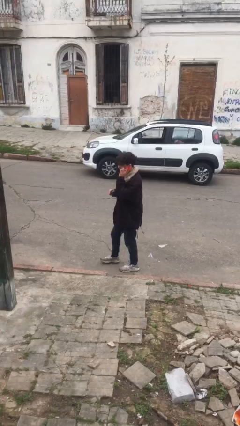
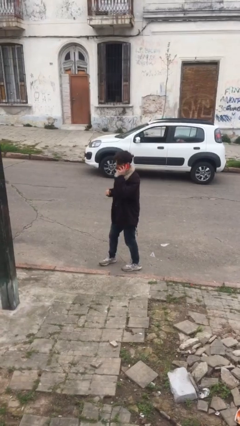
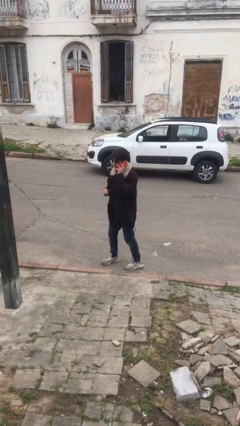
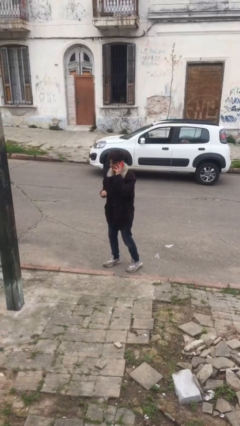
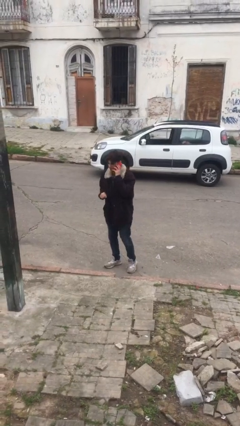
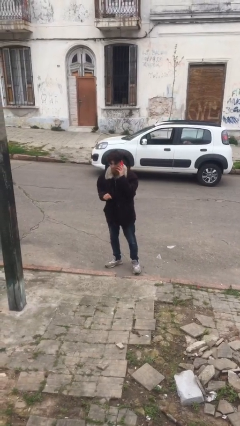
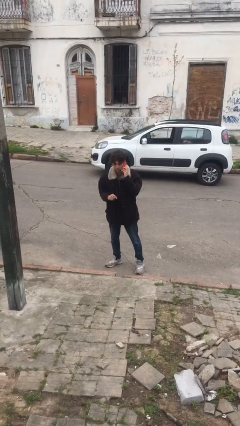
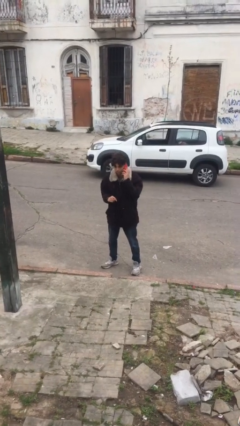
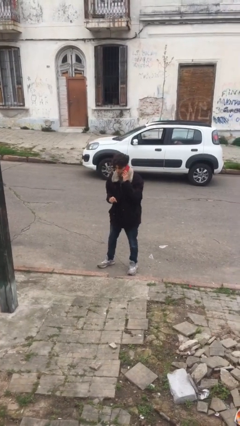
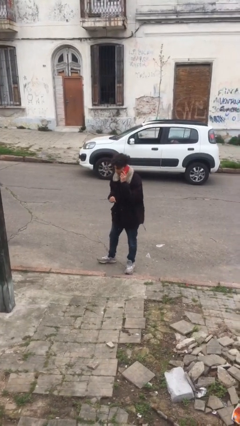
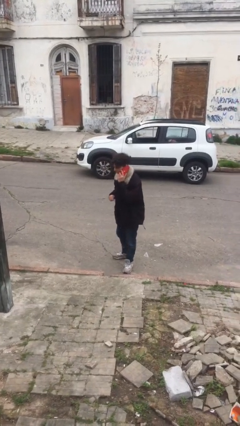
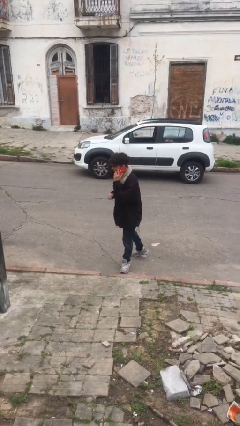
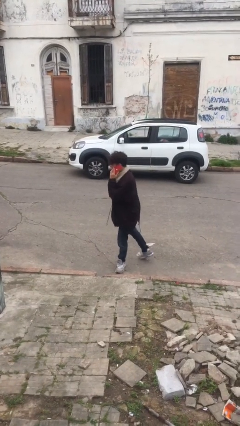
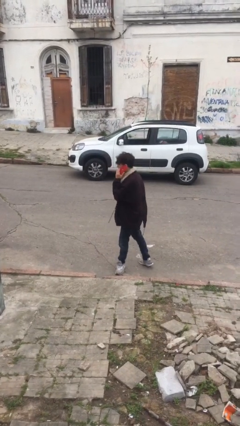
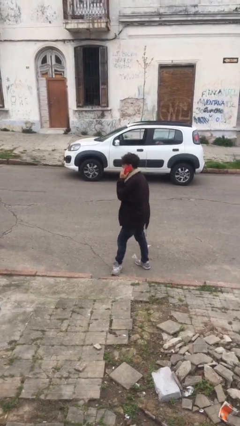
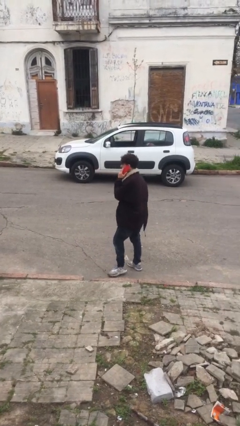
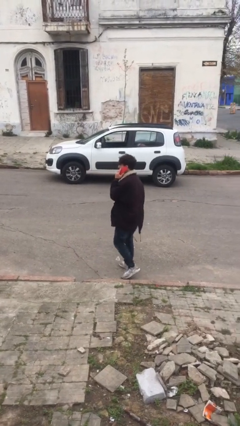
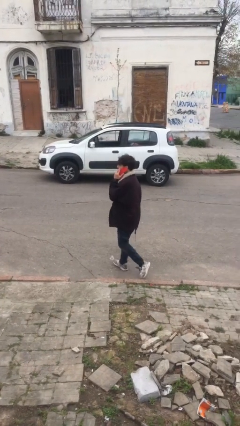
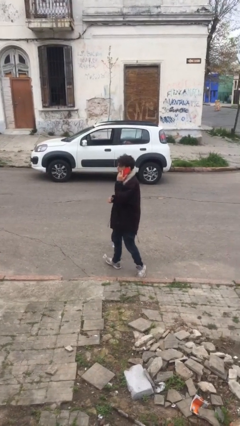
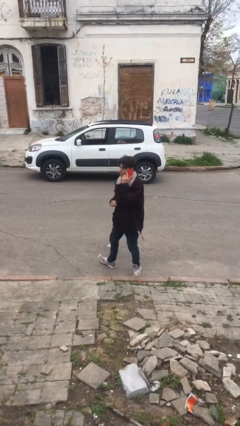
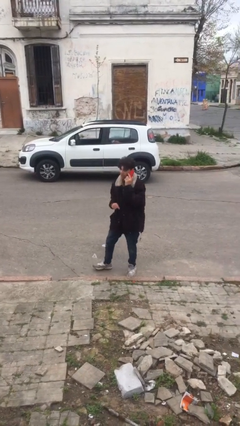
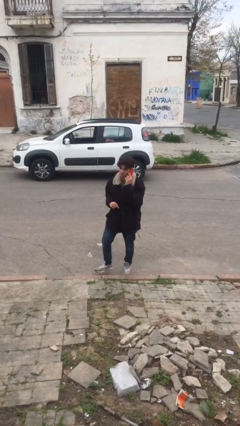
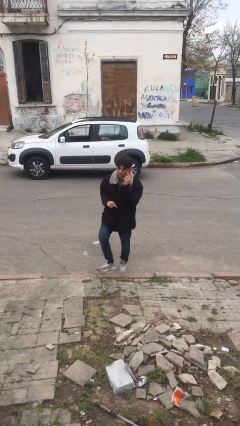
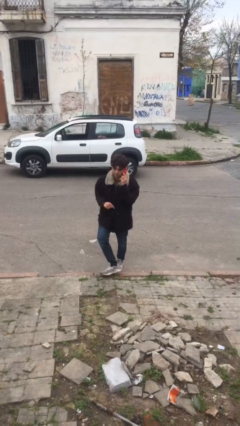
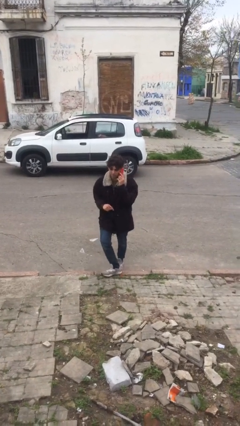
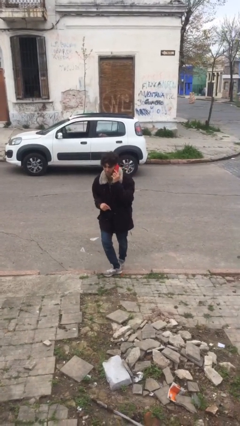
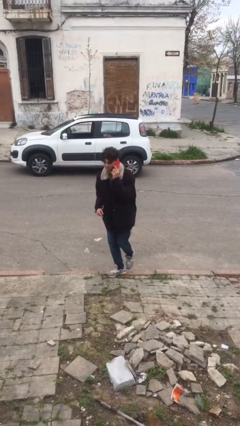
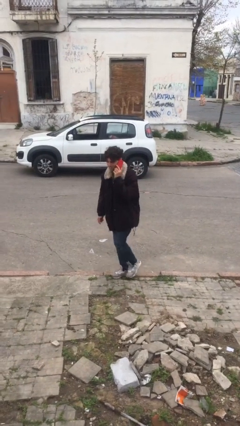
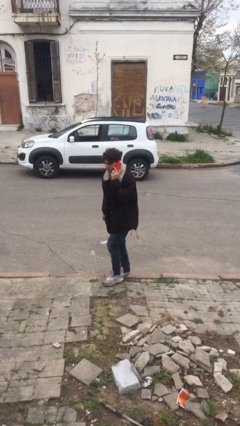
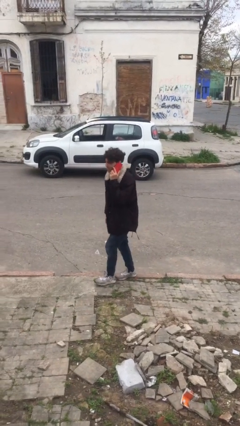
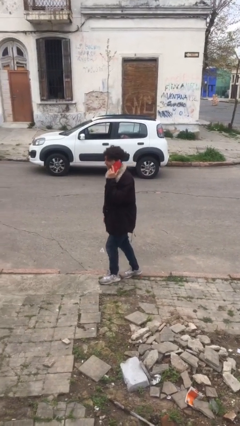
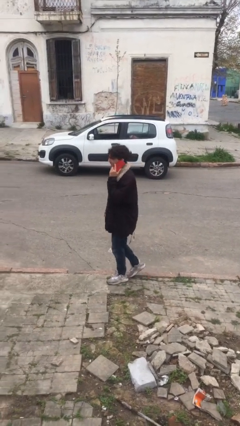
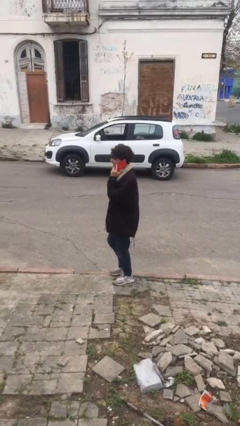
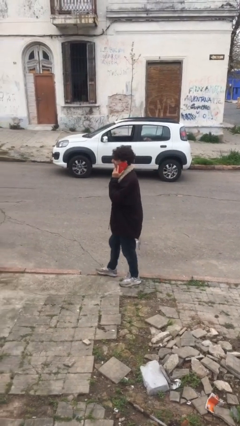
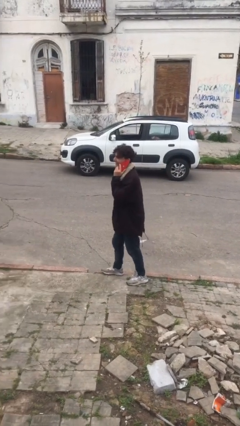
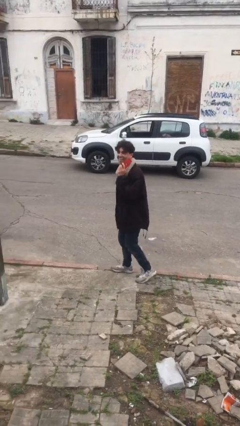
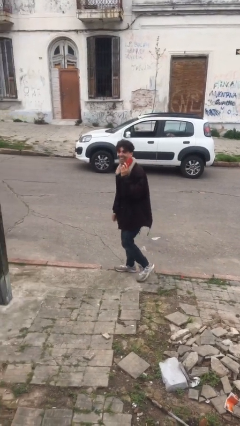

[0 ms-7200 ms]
person talks on phone

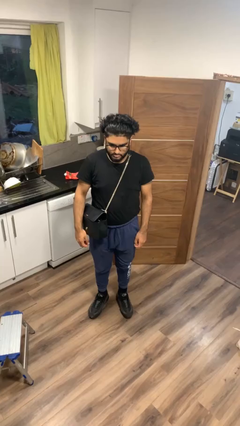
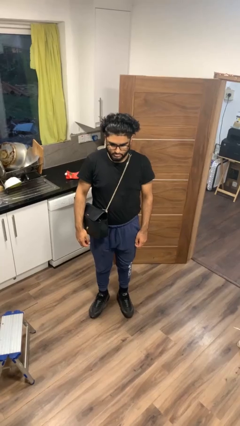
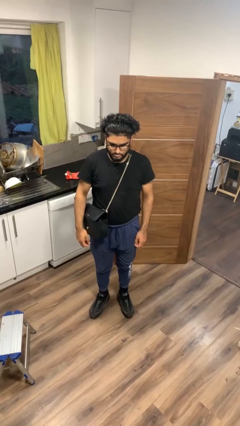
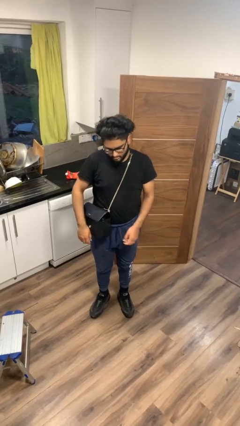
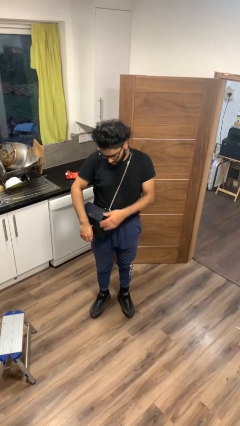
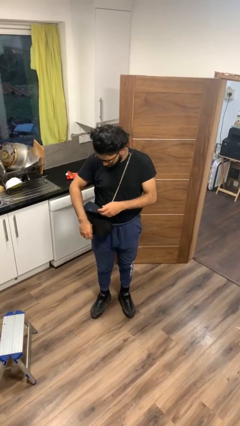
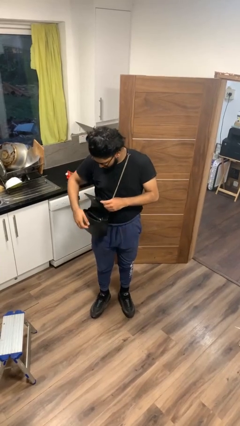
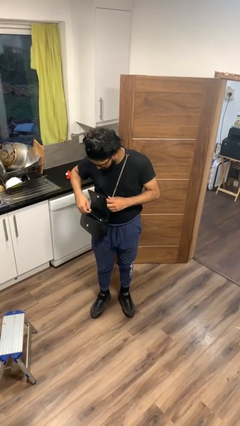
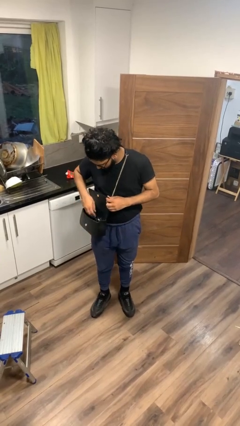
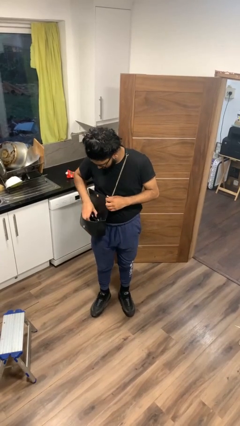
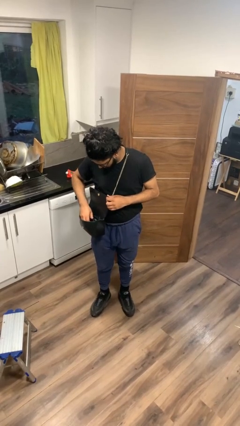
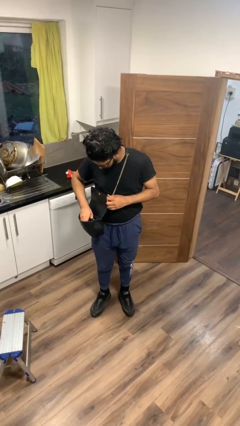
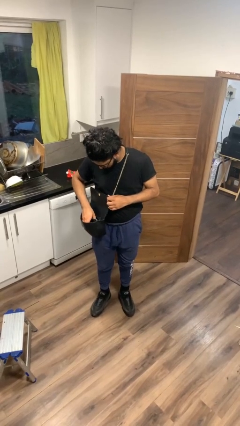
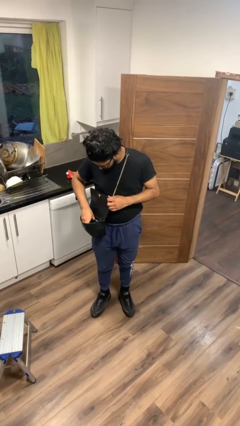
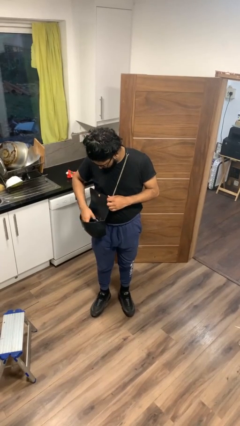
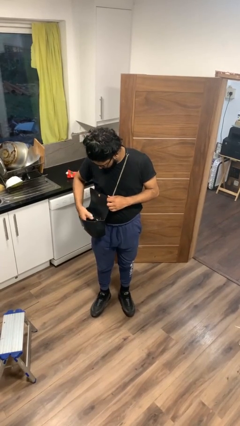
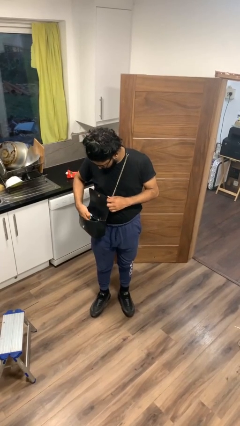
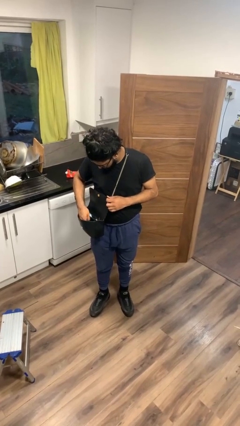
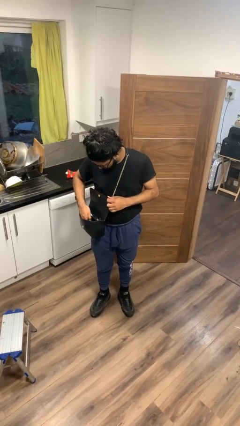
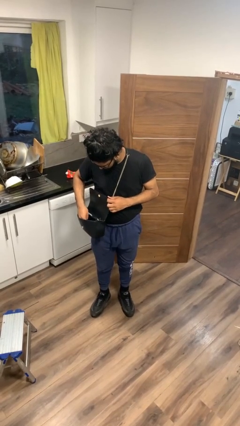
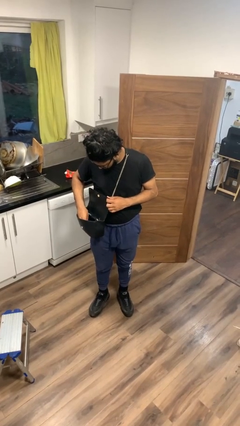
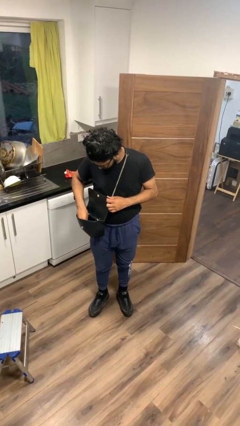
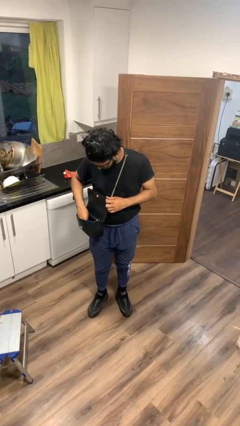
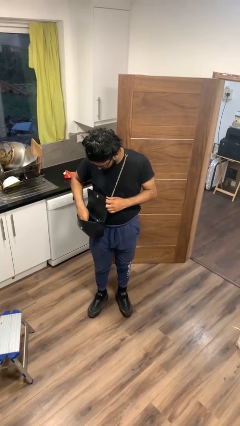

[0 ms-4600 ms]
person searches in purse

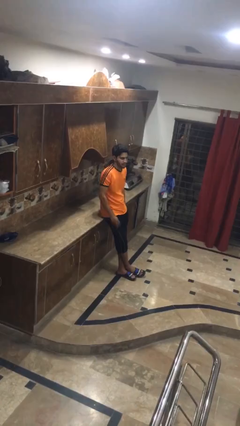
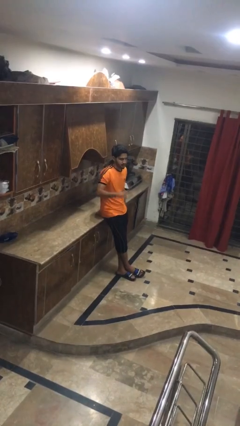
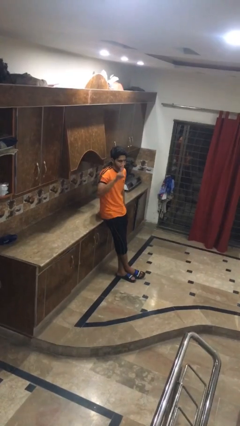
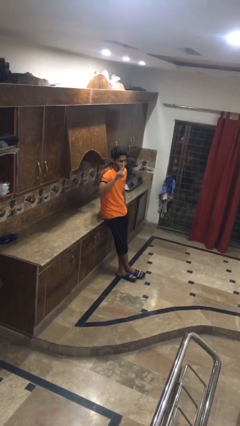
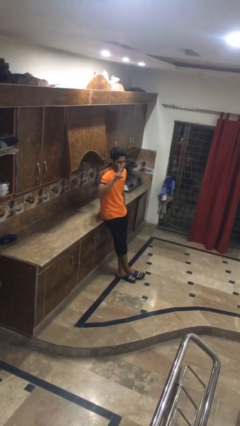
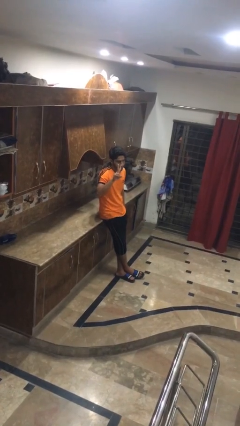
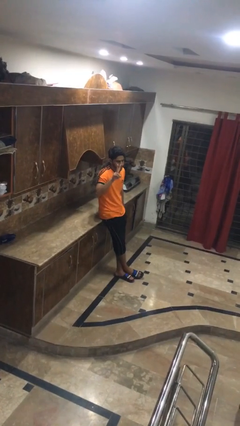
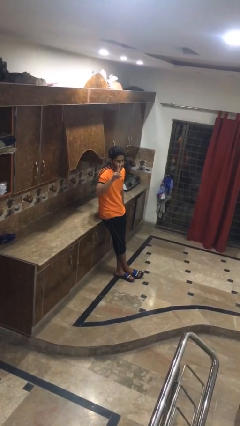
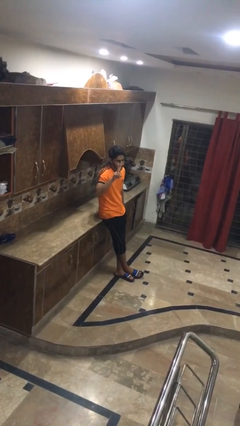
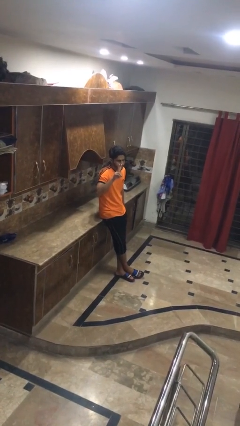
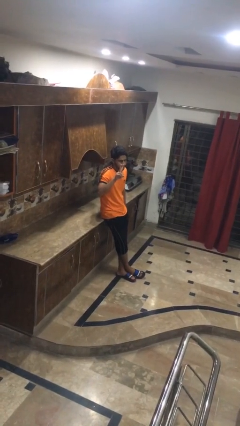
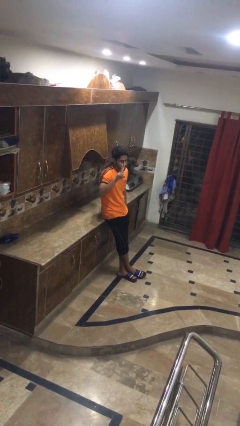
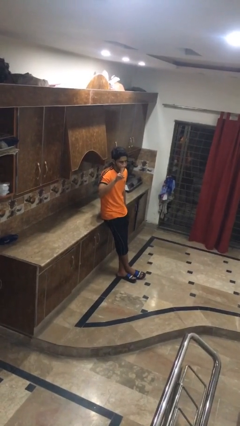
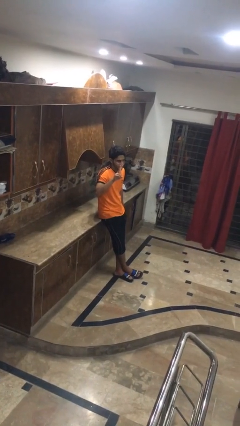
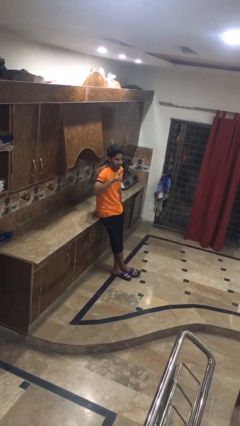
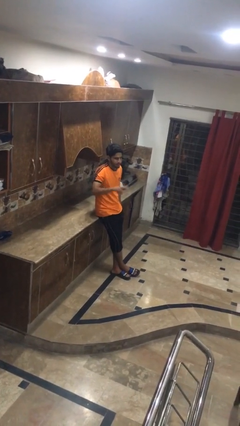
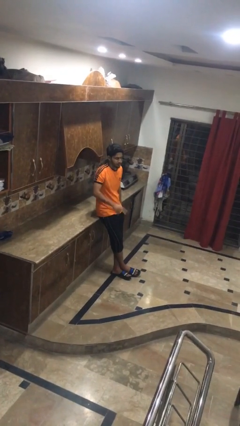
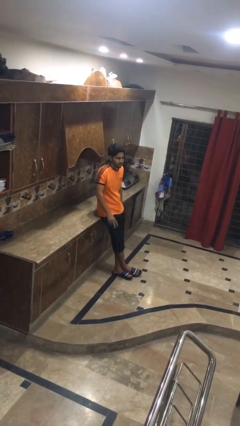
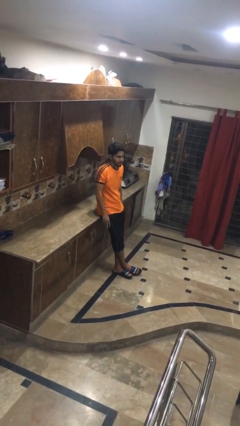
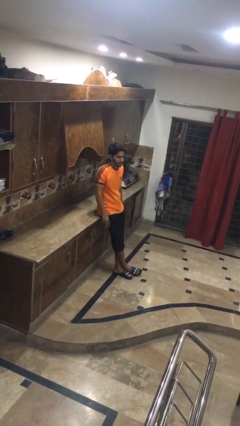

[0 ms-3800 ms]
person gestures peace

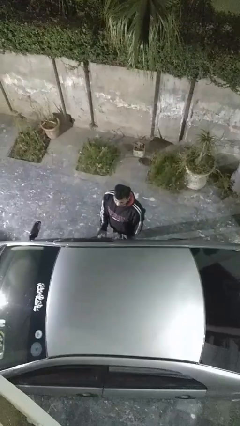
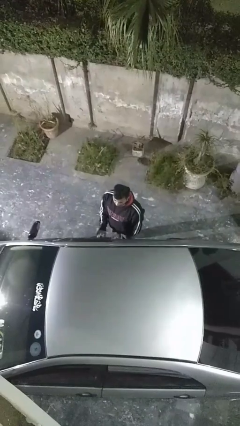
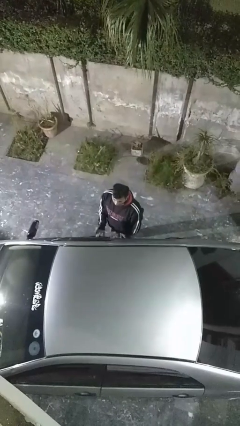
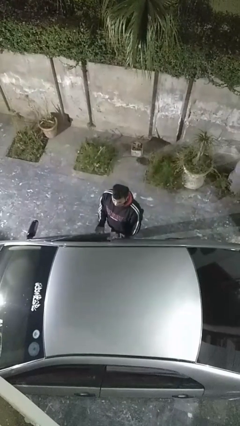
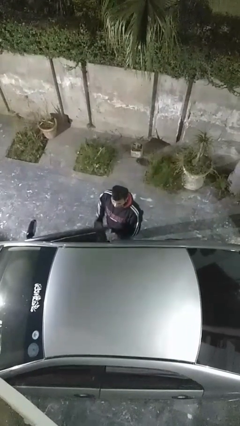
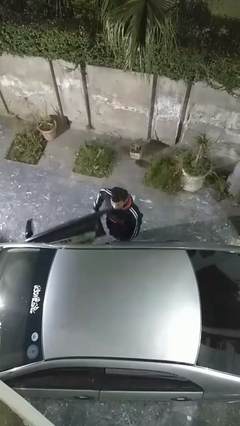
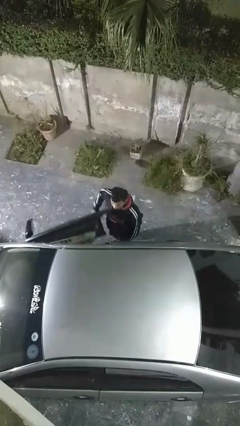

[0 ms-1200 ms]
person opens car door

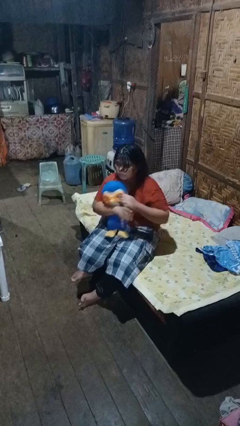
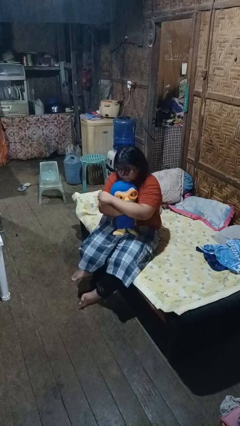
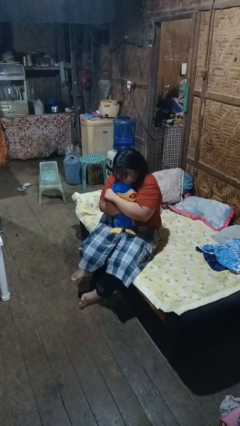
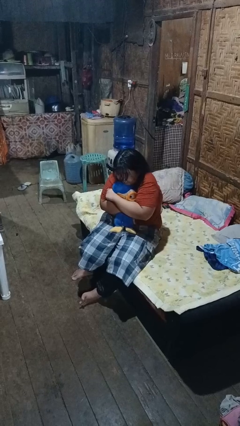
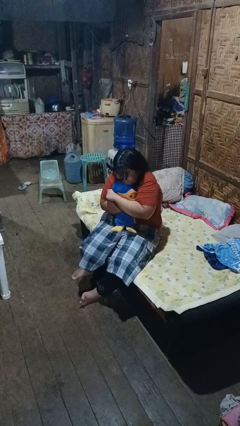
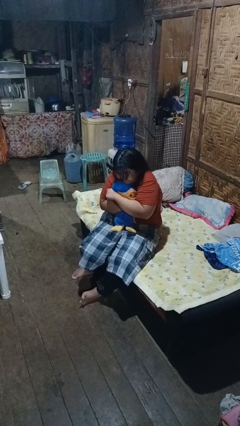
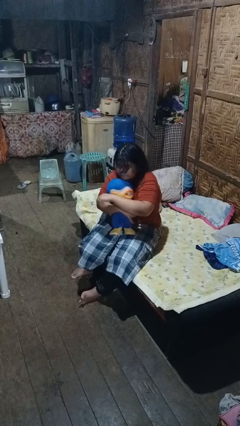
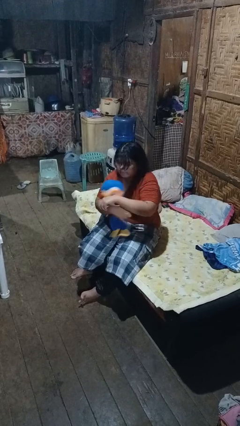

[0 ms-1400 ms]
person hugs stuffed animal
